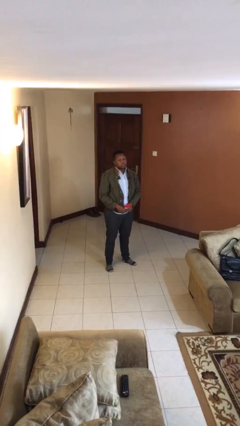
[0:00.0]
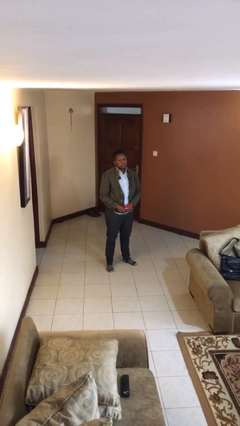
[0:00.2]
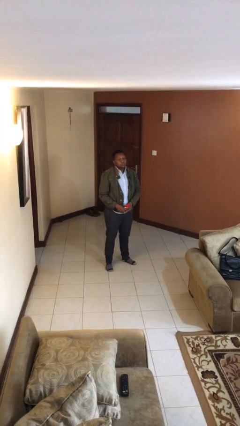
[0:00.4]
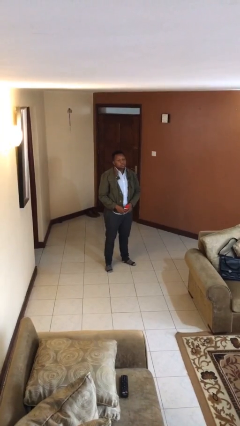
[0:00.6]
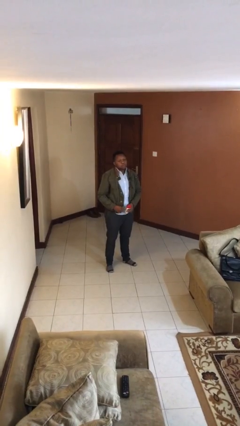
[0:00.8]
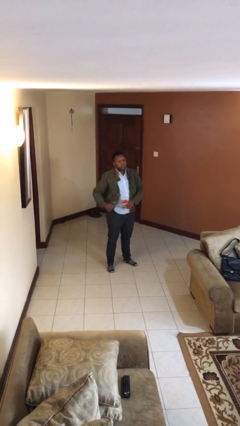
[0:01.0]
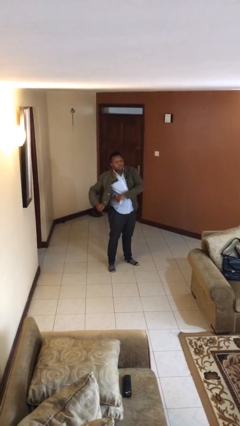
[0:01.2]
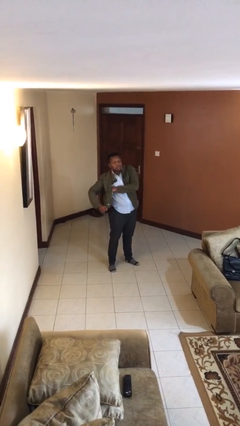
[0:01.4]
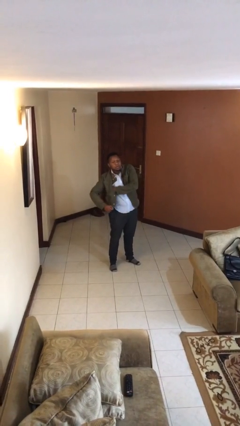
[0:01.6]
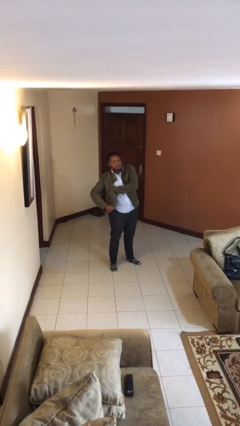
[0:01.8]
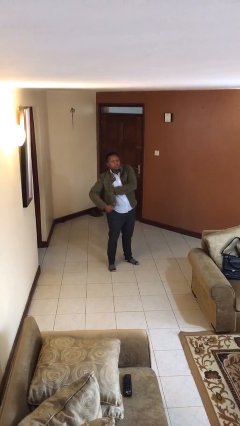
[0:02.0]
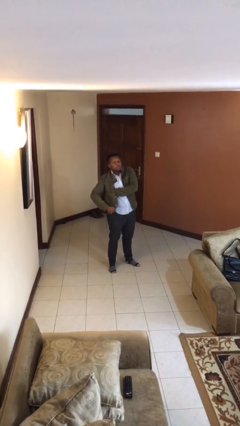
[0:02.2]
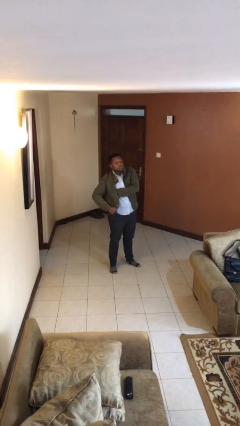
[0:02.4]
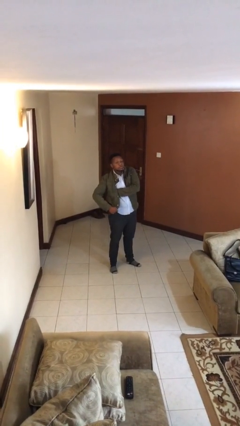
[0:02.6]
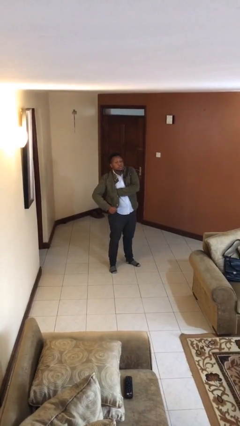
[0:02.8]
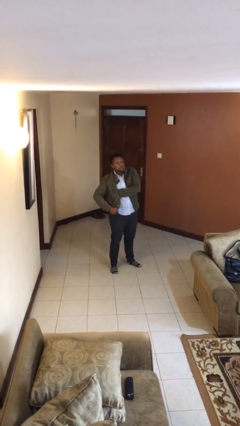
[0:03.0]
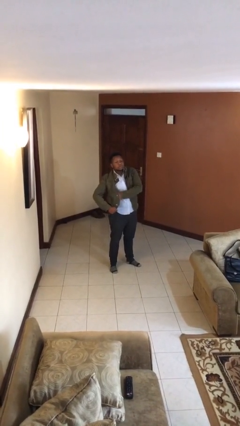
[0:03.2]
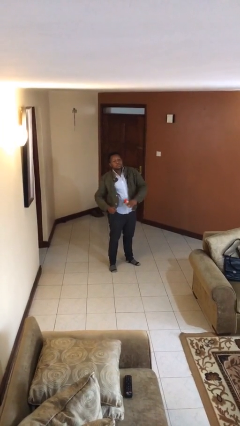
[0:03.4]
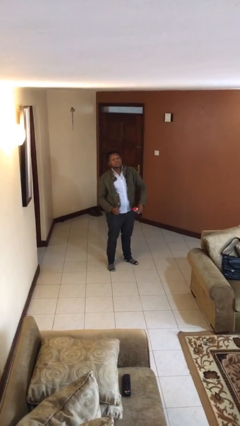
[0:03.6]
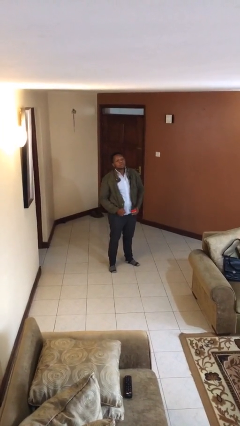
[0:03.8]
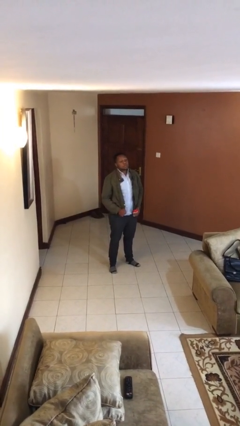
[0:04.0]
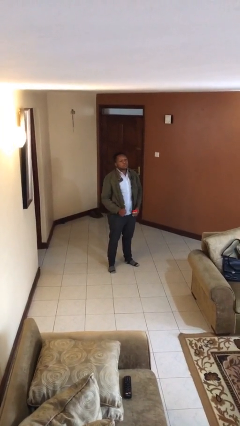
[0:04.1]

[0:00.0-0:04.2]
person applies deodorant

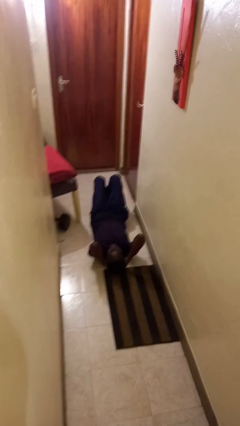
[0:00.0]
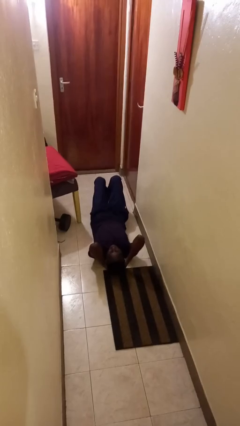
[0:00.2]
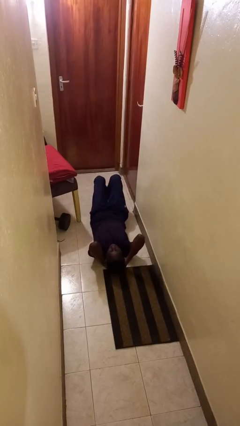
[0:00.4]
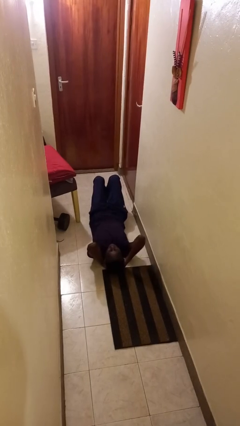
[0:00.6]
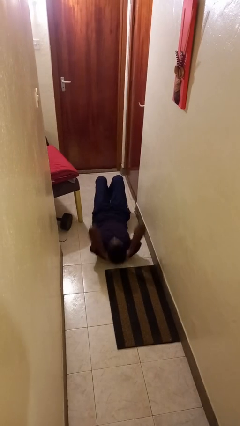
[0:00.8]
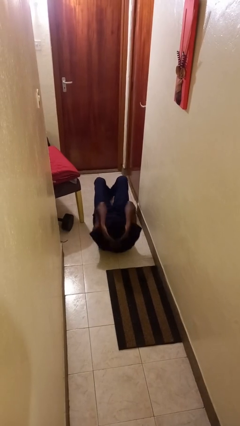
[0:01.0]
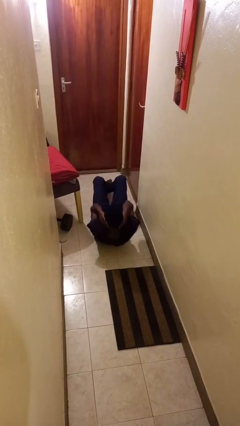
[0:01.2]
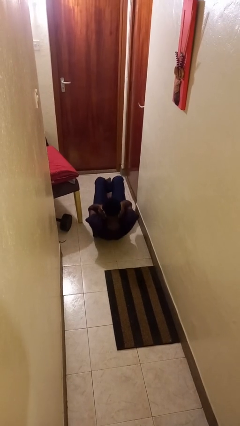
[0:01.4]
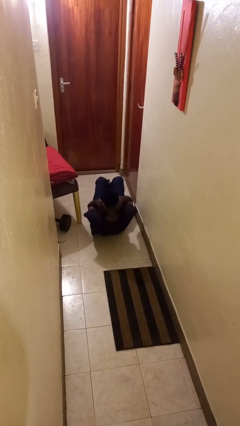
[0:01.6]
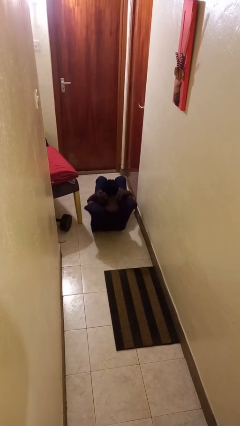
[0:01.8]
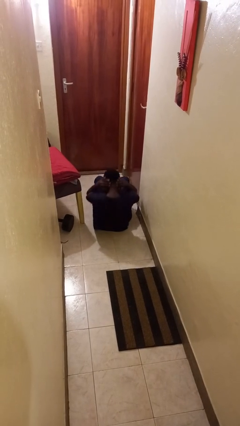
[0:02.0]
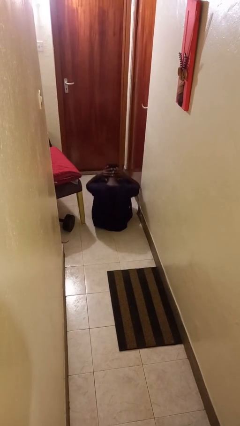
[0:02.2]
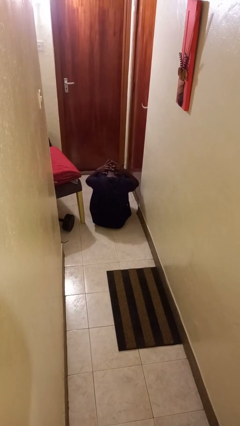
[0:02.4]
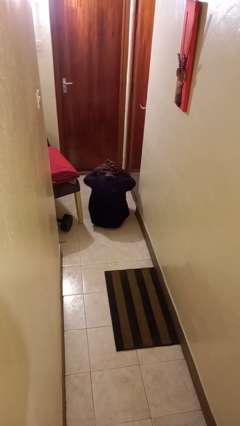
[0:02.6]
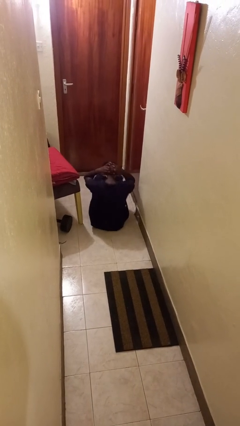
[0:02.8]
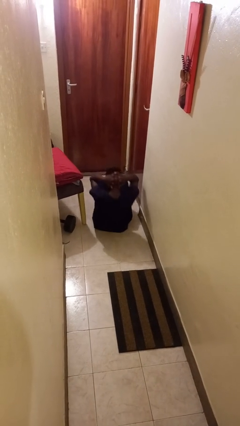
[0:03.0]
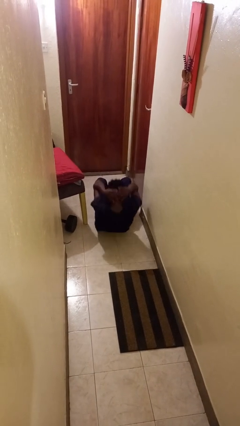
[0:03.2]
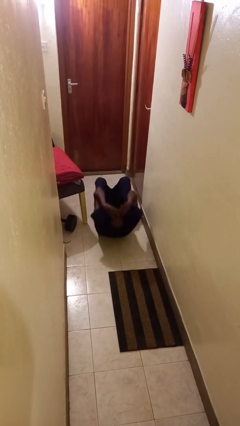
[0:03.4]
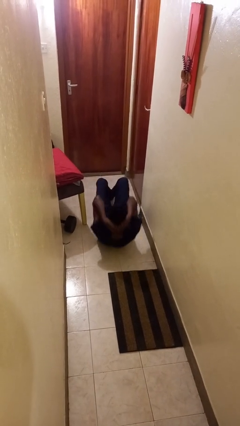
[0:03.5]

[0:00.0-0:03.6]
person exercises with situp

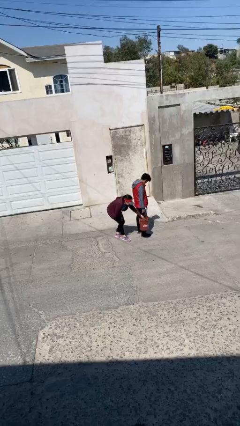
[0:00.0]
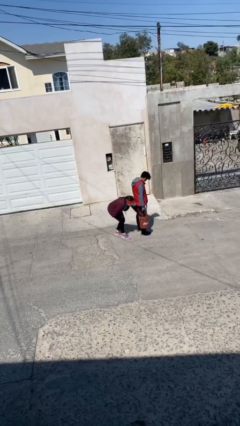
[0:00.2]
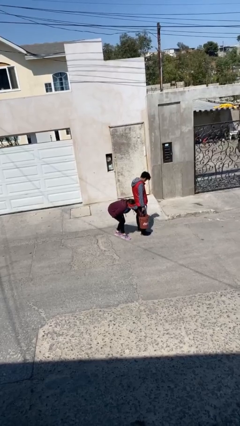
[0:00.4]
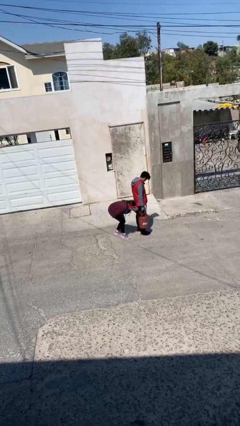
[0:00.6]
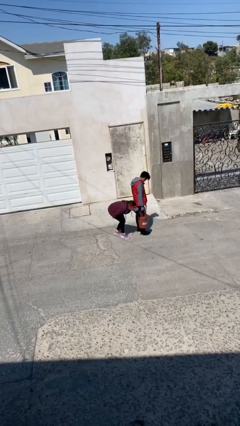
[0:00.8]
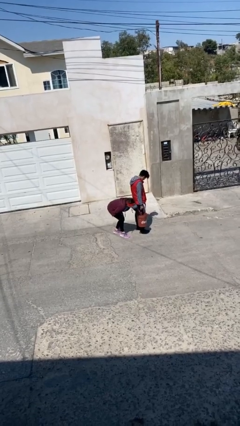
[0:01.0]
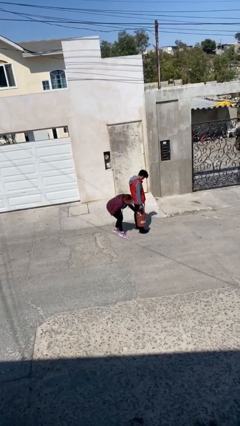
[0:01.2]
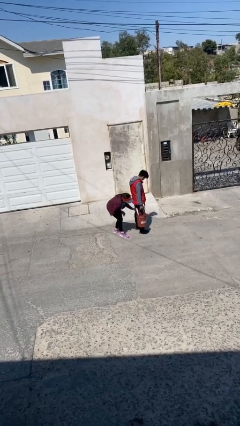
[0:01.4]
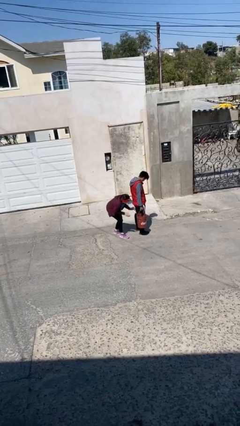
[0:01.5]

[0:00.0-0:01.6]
person steals object from person

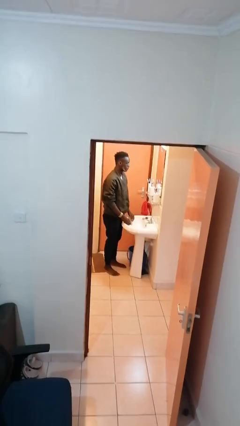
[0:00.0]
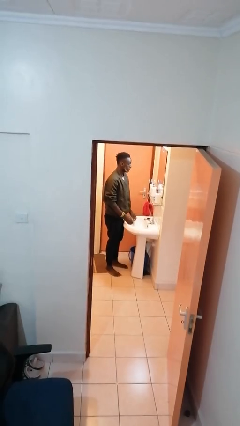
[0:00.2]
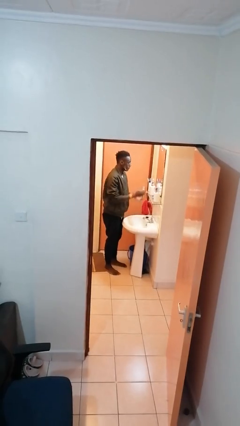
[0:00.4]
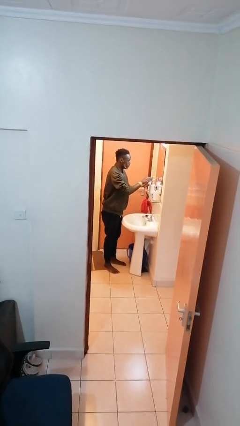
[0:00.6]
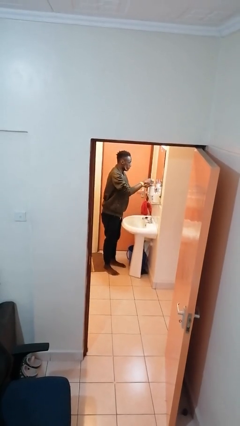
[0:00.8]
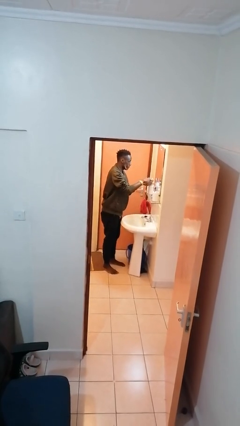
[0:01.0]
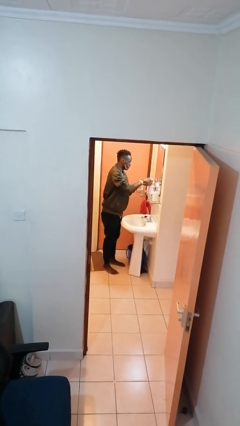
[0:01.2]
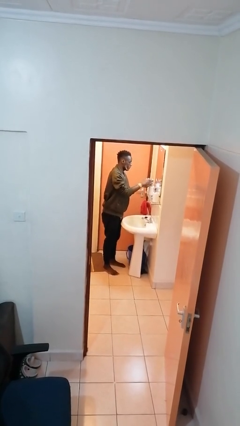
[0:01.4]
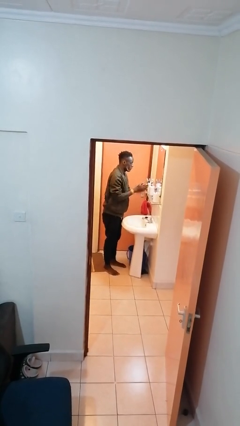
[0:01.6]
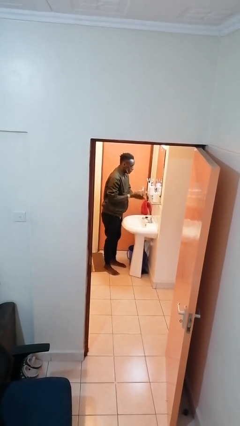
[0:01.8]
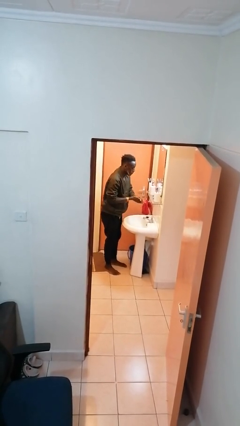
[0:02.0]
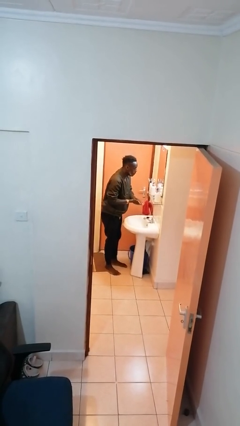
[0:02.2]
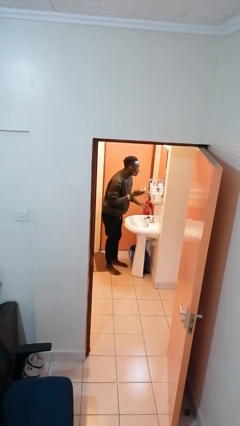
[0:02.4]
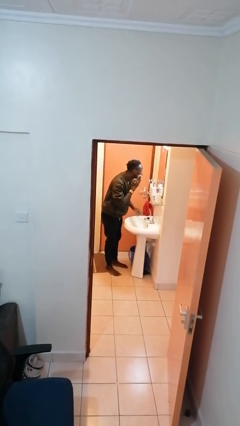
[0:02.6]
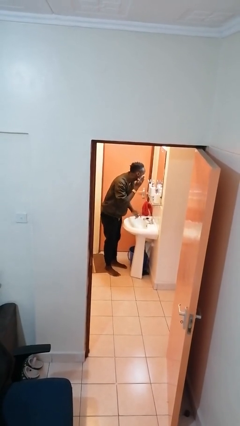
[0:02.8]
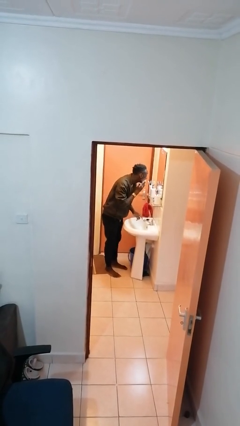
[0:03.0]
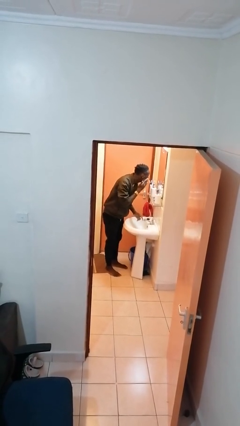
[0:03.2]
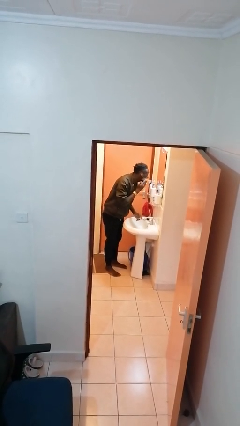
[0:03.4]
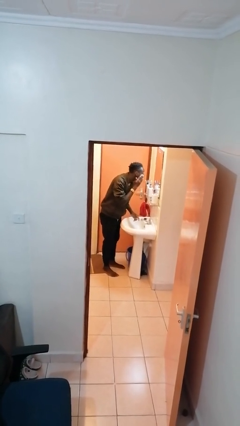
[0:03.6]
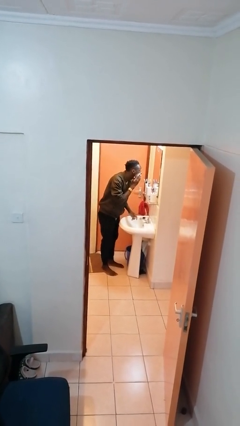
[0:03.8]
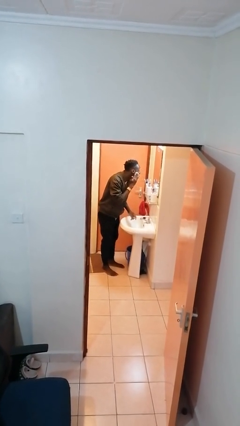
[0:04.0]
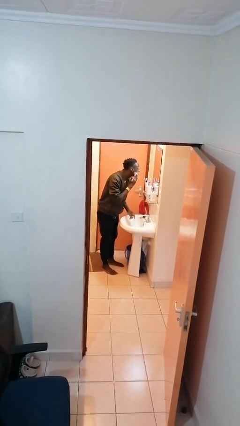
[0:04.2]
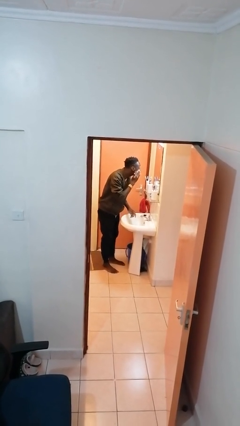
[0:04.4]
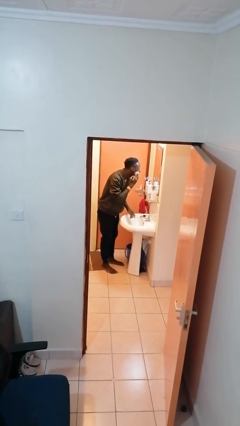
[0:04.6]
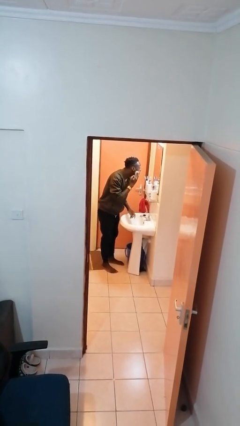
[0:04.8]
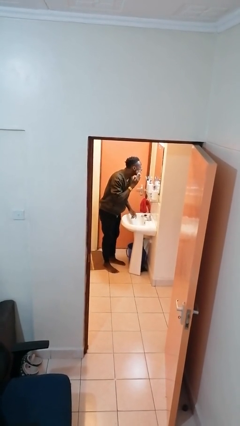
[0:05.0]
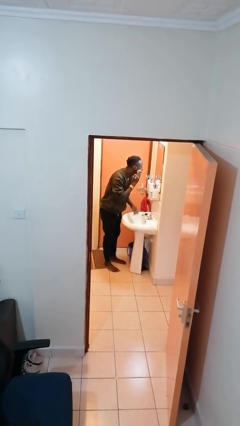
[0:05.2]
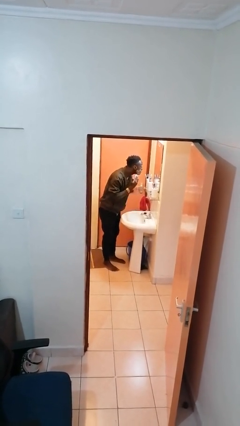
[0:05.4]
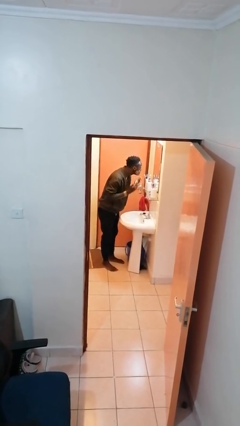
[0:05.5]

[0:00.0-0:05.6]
person applies shaving cream

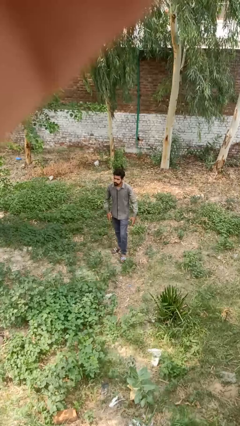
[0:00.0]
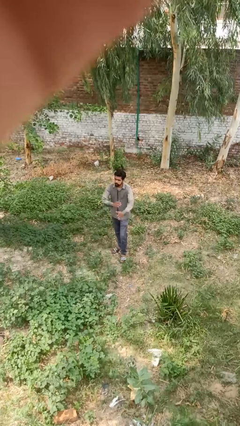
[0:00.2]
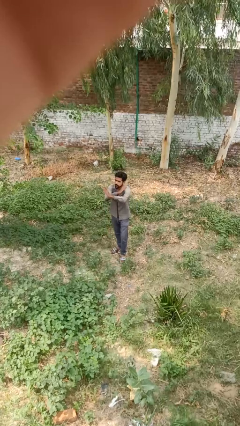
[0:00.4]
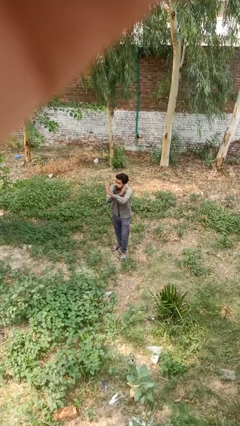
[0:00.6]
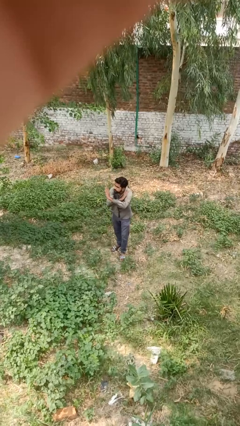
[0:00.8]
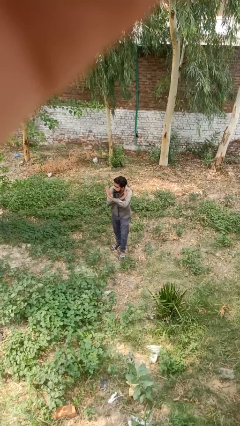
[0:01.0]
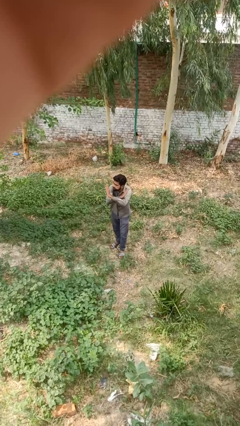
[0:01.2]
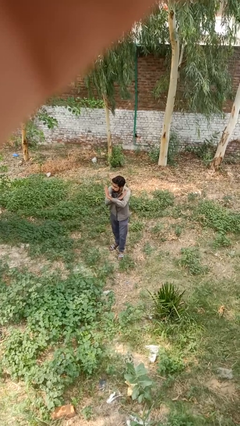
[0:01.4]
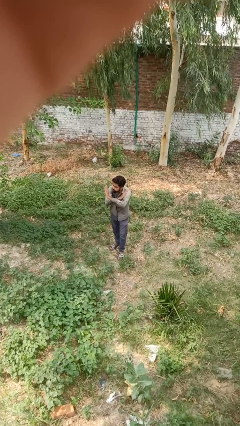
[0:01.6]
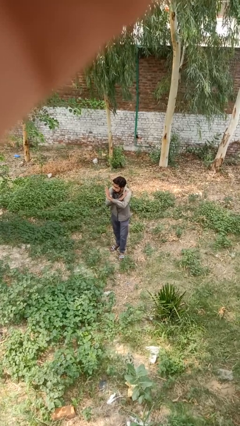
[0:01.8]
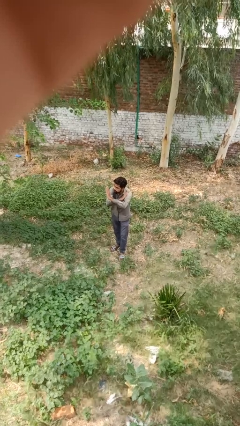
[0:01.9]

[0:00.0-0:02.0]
person crosses arms

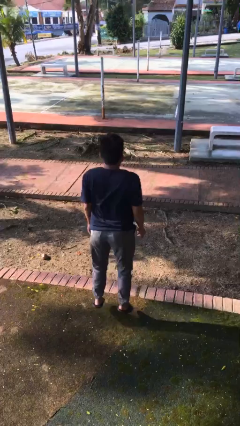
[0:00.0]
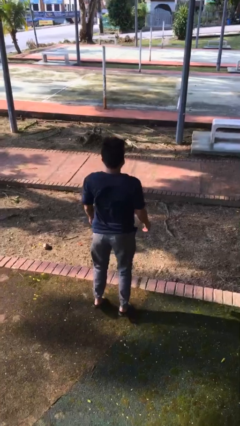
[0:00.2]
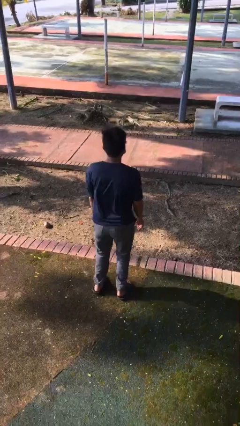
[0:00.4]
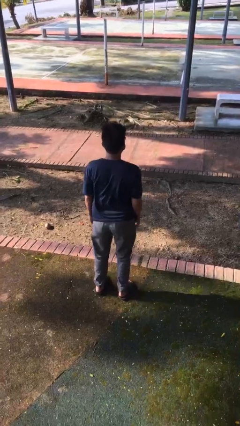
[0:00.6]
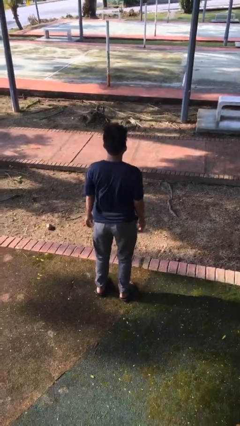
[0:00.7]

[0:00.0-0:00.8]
person jumps
